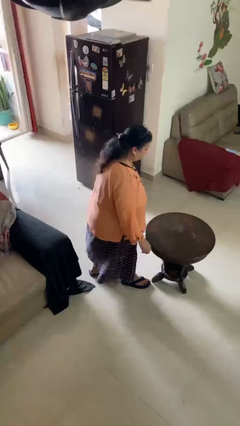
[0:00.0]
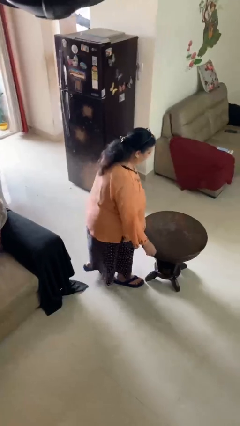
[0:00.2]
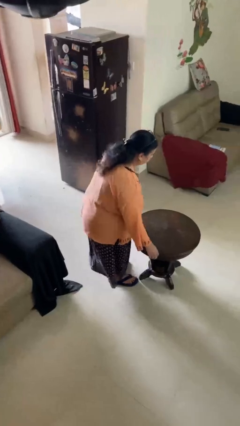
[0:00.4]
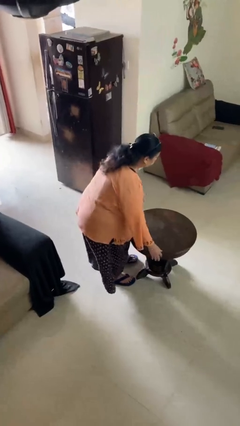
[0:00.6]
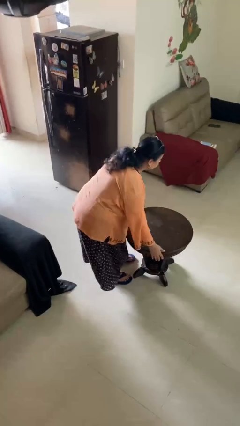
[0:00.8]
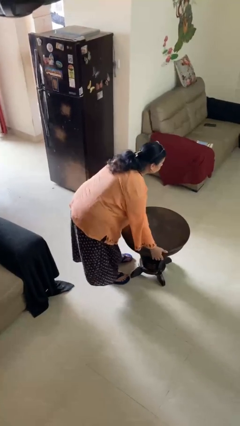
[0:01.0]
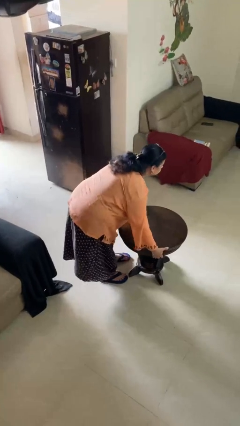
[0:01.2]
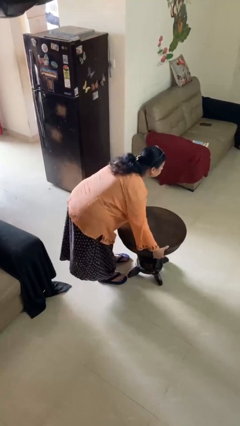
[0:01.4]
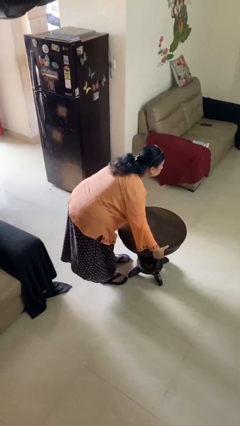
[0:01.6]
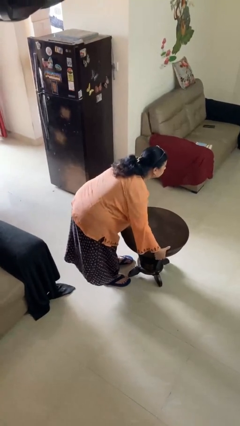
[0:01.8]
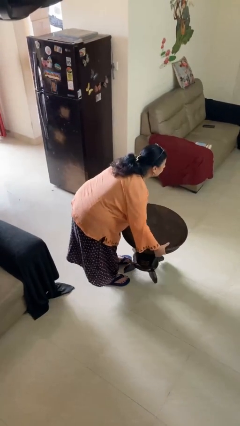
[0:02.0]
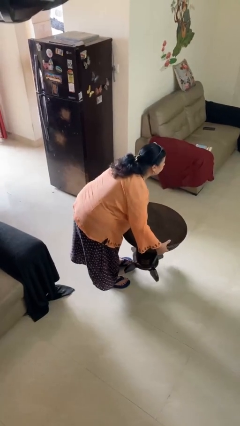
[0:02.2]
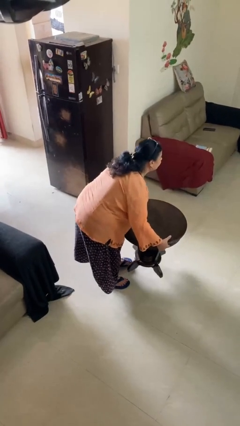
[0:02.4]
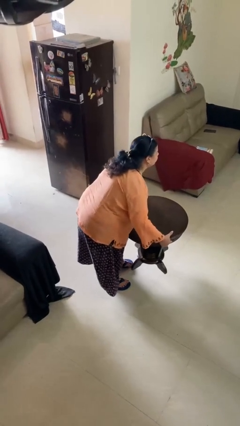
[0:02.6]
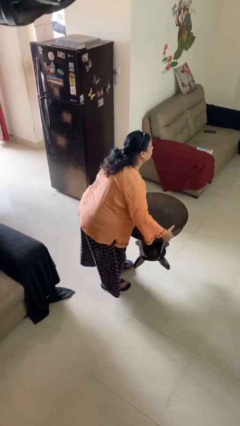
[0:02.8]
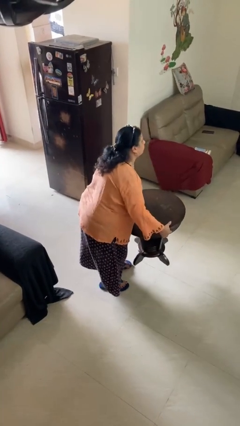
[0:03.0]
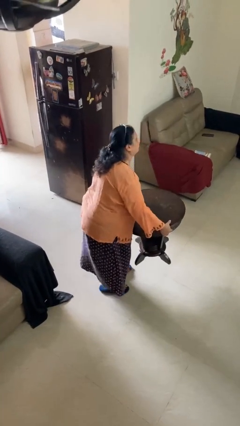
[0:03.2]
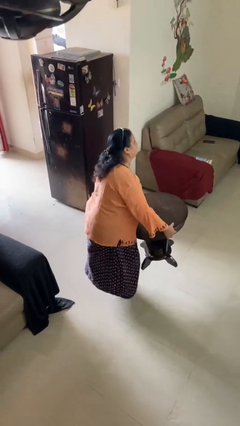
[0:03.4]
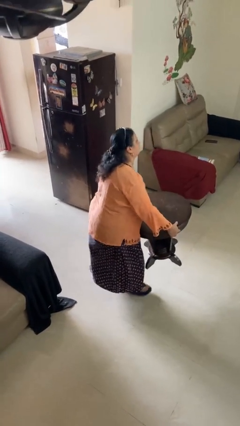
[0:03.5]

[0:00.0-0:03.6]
person picks up object from floor

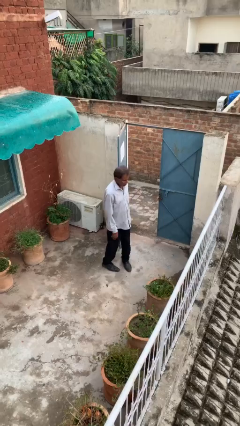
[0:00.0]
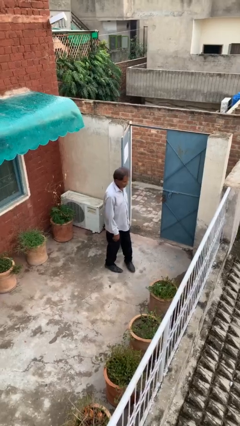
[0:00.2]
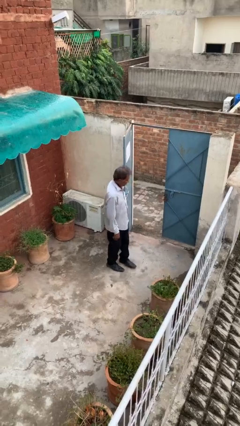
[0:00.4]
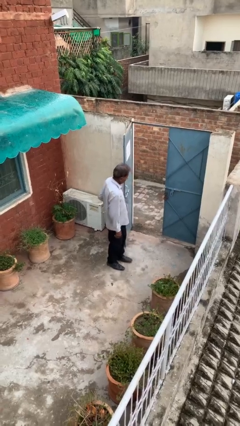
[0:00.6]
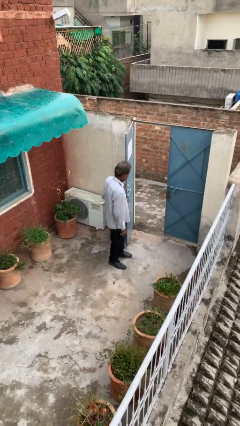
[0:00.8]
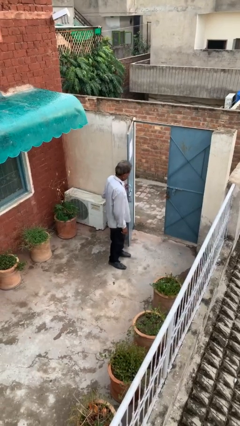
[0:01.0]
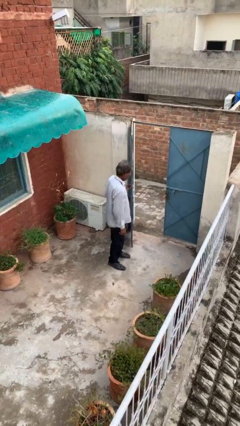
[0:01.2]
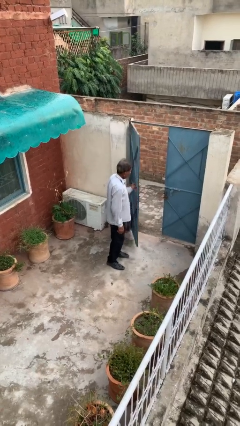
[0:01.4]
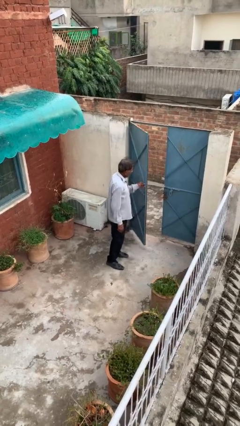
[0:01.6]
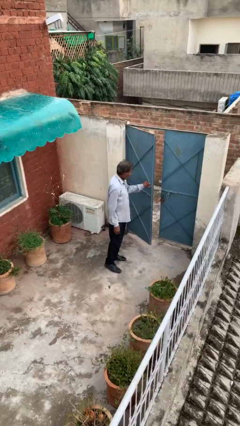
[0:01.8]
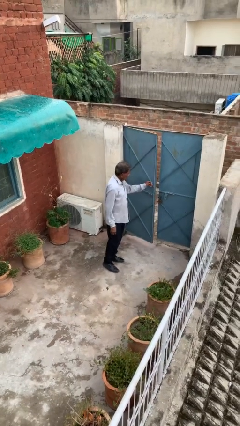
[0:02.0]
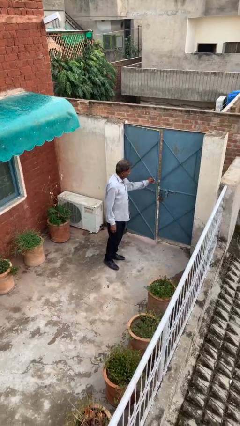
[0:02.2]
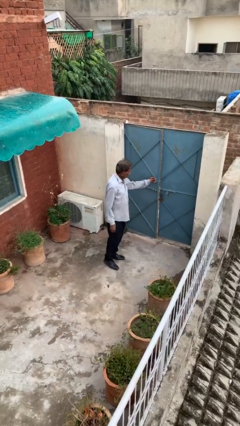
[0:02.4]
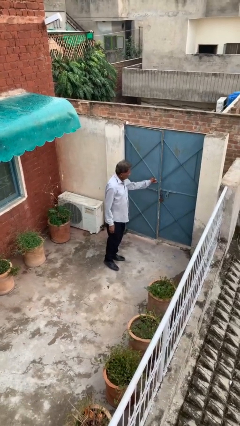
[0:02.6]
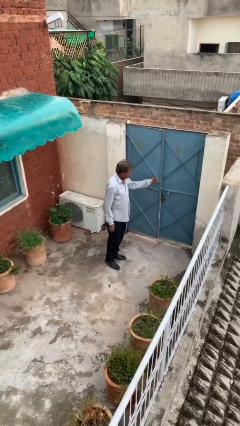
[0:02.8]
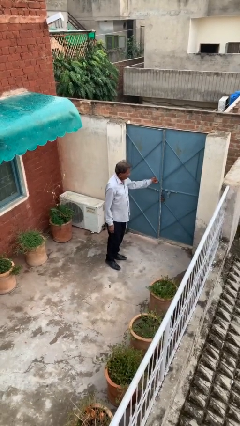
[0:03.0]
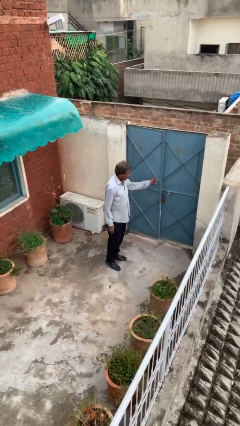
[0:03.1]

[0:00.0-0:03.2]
person closes facility door

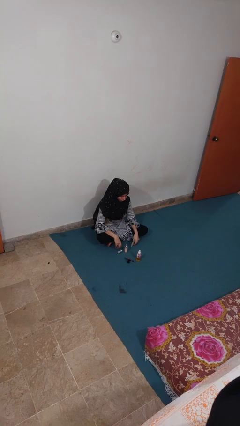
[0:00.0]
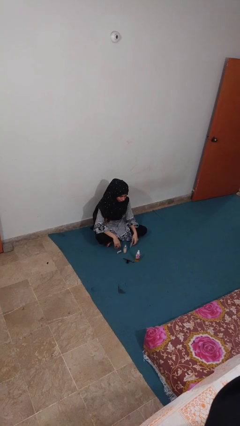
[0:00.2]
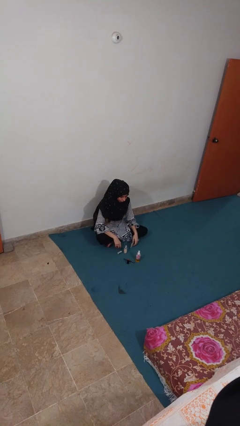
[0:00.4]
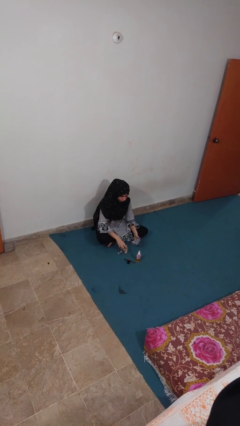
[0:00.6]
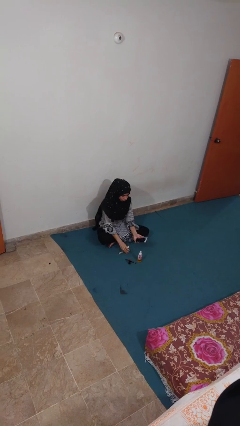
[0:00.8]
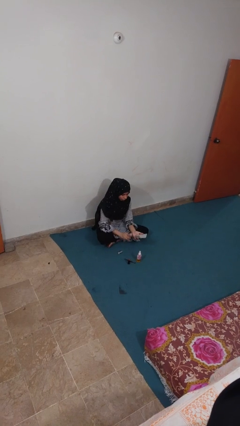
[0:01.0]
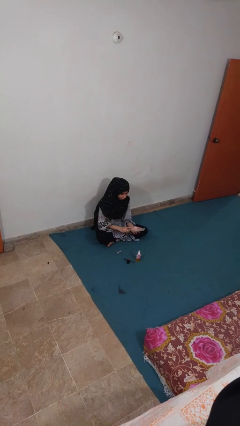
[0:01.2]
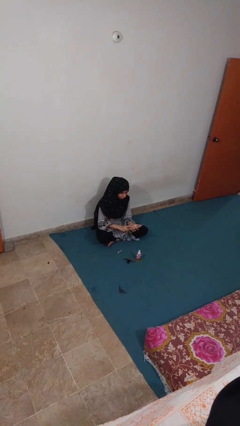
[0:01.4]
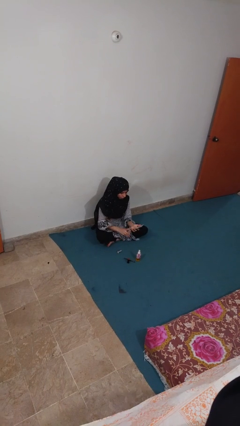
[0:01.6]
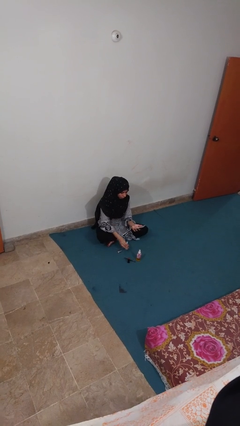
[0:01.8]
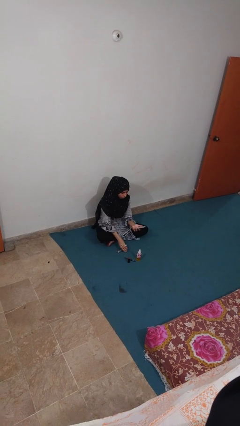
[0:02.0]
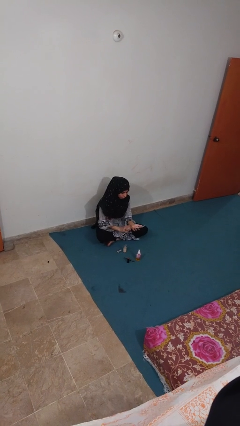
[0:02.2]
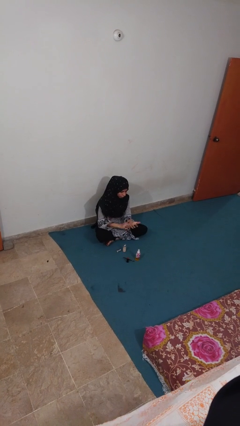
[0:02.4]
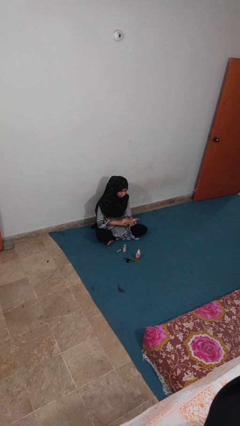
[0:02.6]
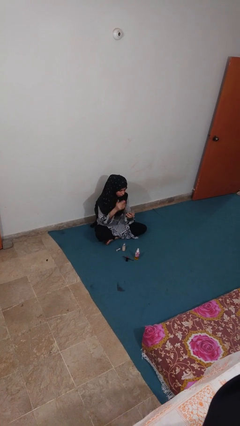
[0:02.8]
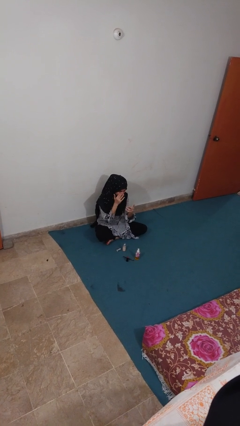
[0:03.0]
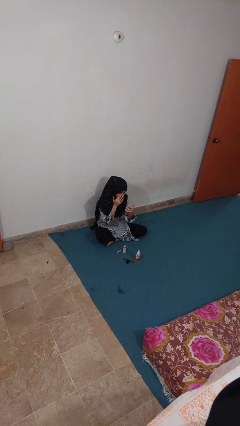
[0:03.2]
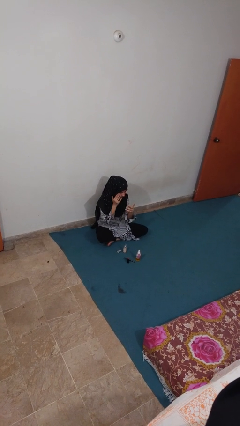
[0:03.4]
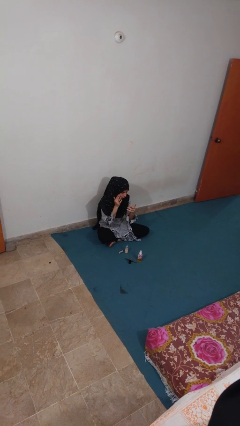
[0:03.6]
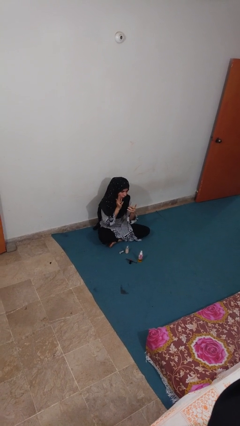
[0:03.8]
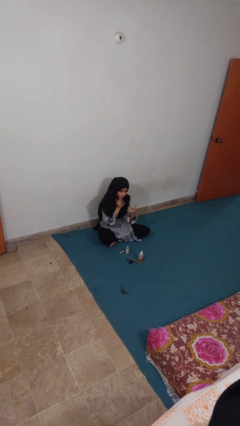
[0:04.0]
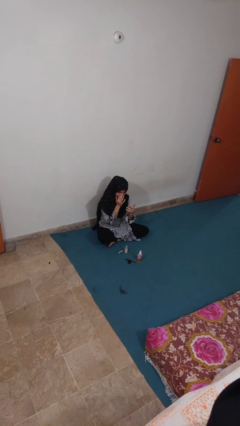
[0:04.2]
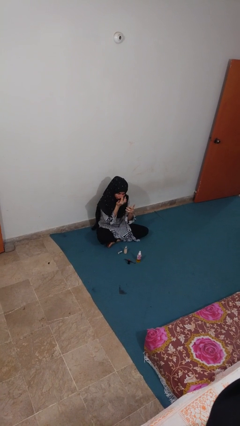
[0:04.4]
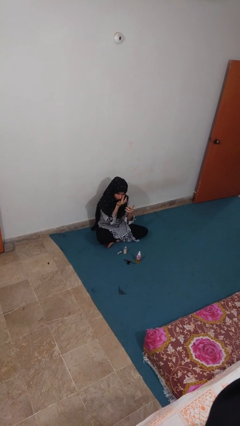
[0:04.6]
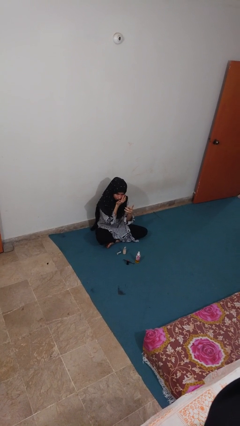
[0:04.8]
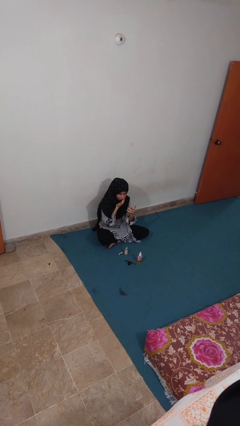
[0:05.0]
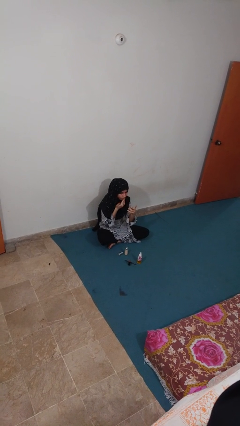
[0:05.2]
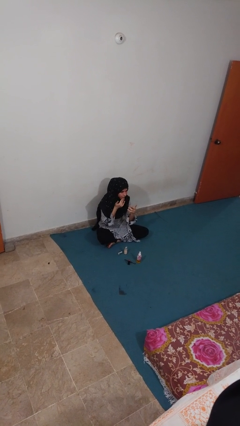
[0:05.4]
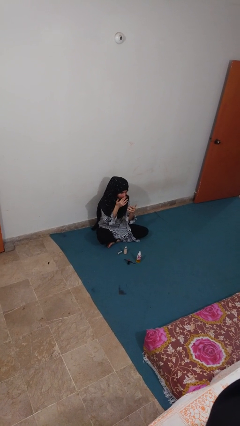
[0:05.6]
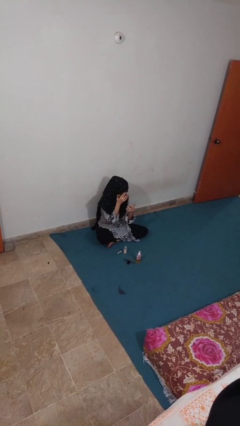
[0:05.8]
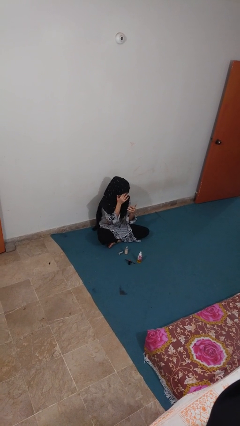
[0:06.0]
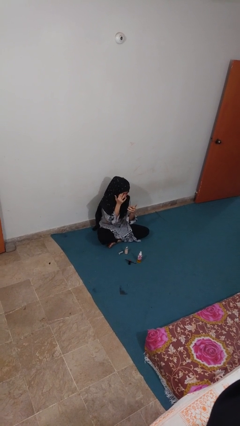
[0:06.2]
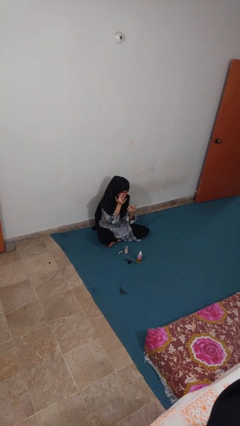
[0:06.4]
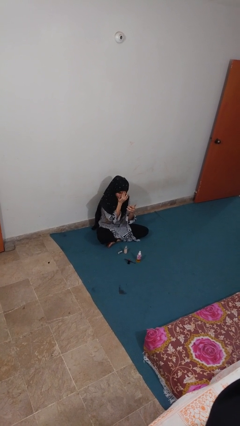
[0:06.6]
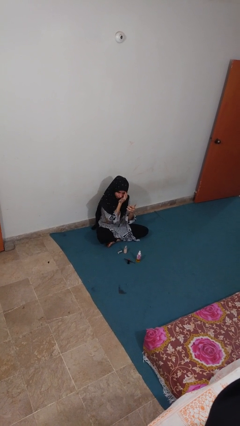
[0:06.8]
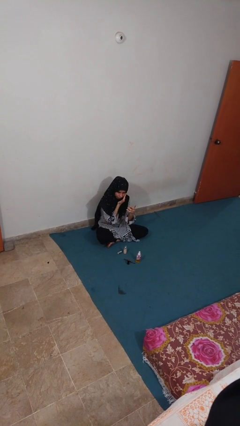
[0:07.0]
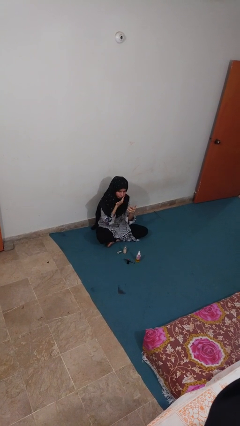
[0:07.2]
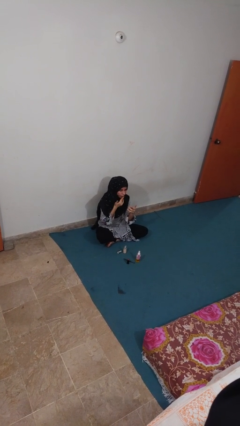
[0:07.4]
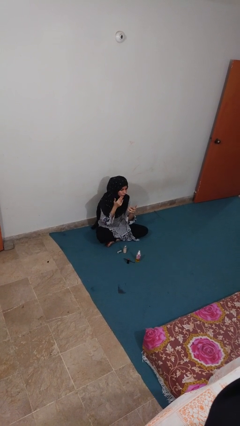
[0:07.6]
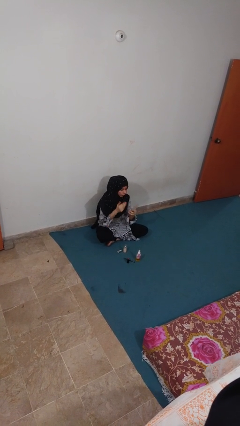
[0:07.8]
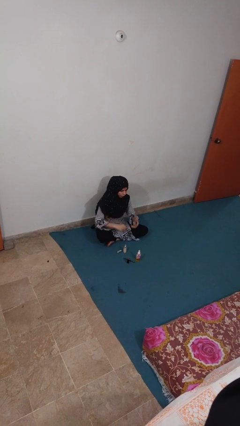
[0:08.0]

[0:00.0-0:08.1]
person applies foundation makeup

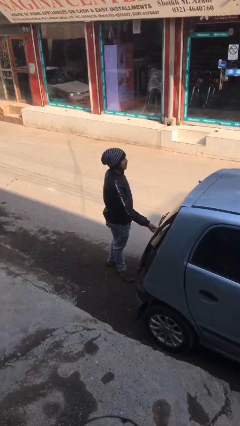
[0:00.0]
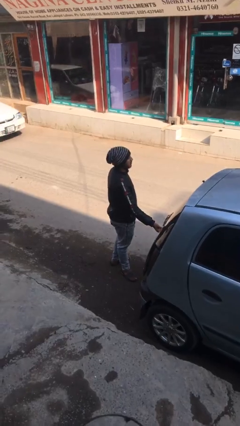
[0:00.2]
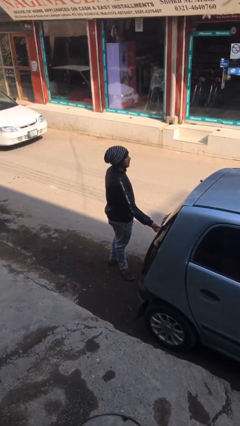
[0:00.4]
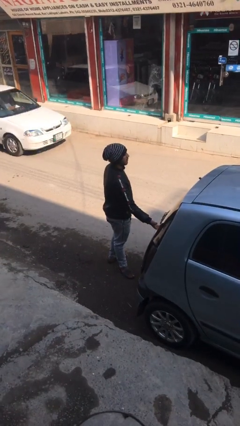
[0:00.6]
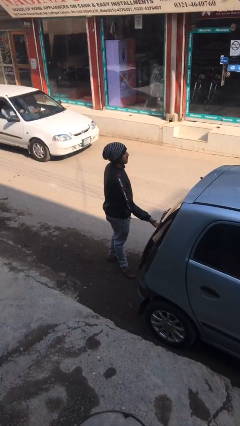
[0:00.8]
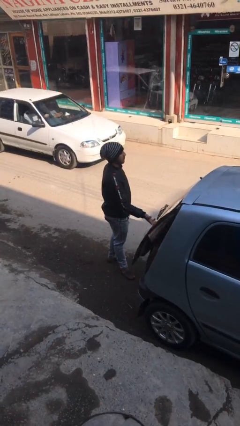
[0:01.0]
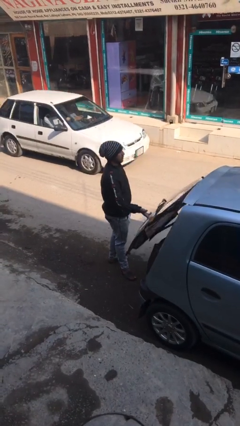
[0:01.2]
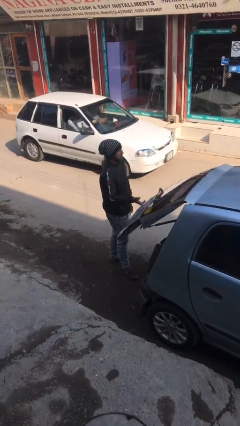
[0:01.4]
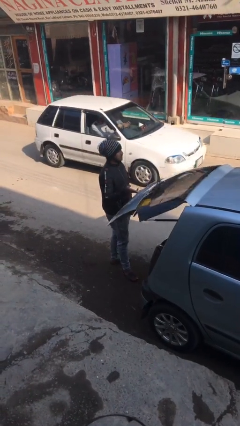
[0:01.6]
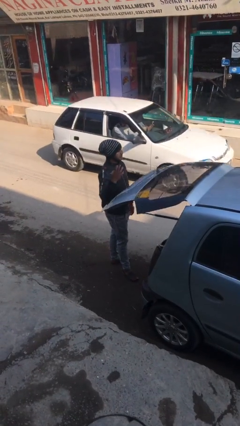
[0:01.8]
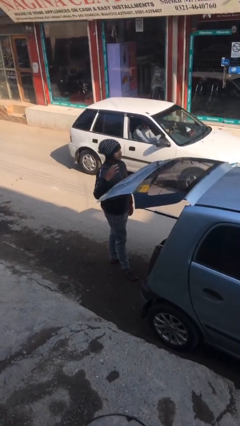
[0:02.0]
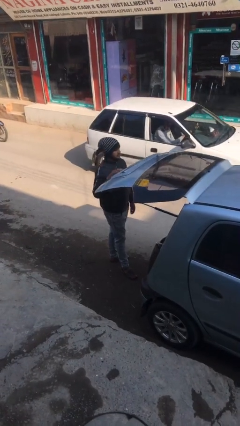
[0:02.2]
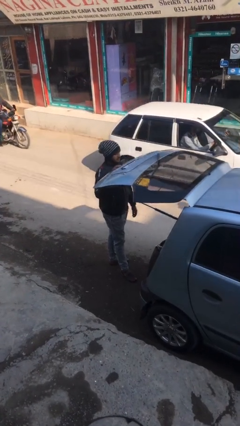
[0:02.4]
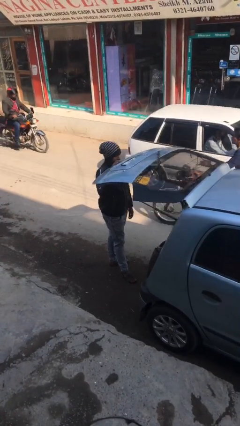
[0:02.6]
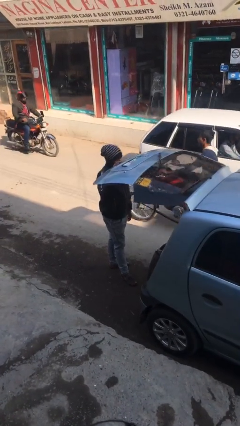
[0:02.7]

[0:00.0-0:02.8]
person opens car trunk
